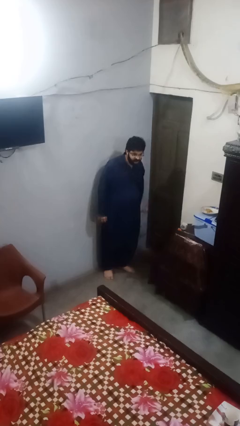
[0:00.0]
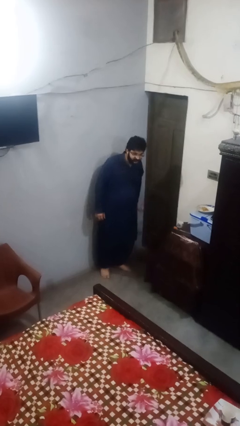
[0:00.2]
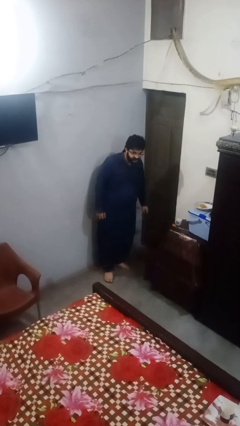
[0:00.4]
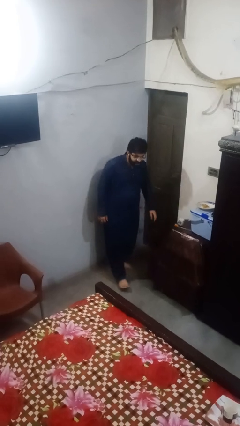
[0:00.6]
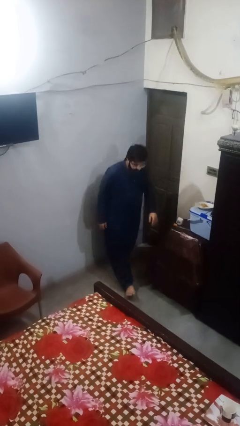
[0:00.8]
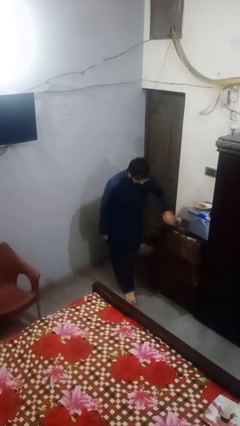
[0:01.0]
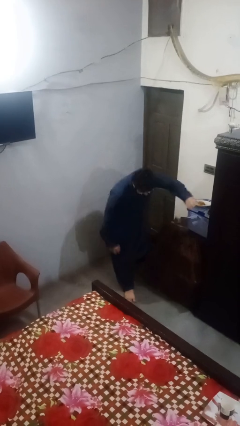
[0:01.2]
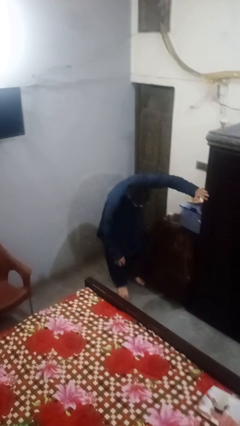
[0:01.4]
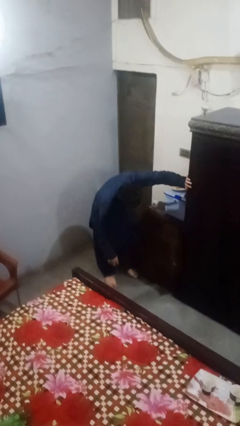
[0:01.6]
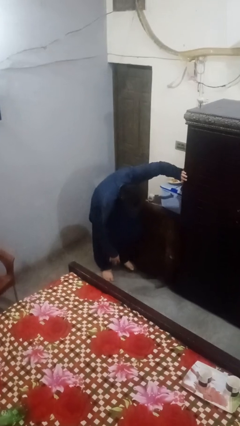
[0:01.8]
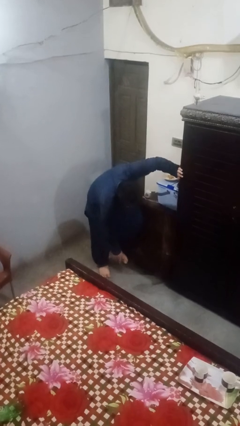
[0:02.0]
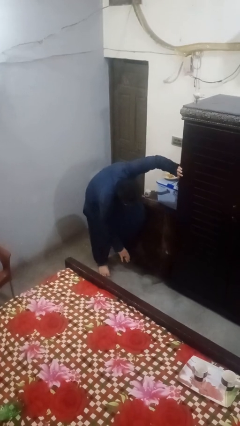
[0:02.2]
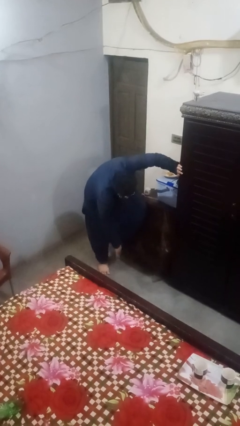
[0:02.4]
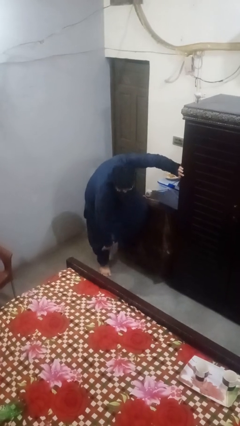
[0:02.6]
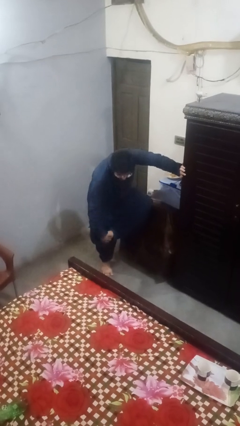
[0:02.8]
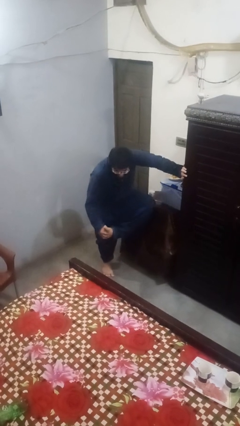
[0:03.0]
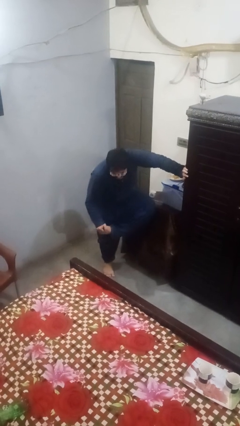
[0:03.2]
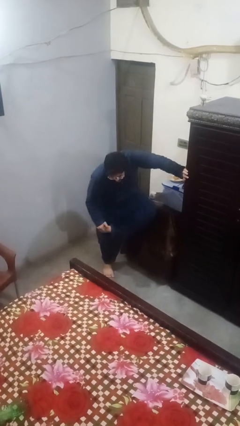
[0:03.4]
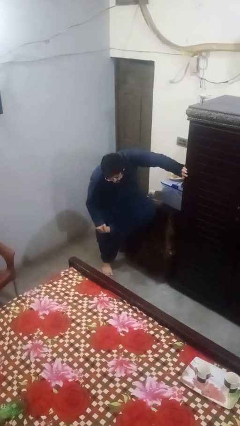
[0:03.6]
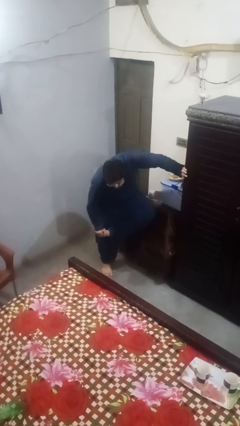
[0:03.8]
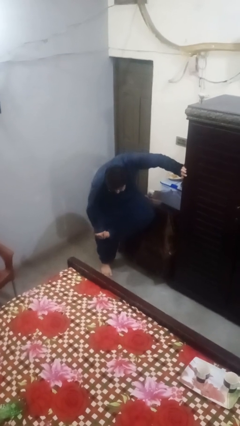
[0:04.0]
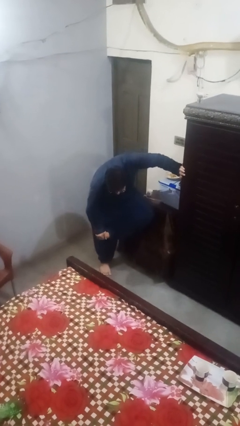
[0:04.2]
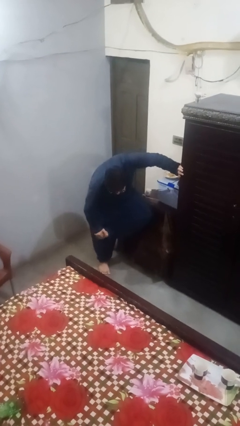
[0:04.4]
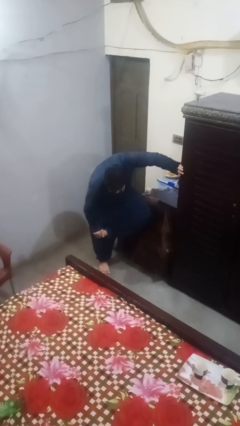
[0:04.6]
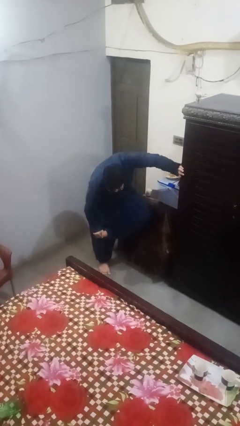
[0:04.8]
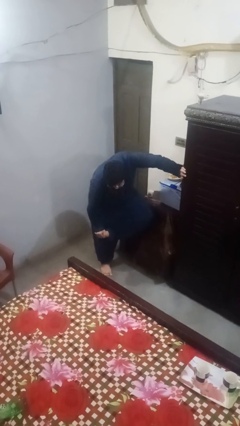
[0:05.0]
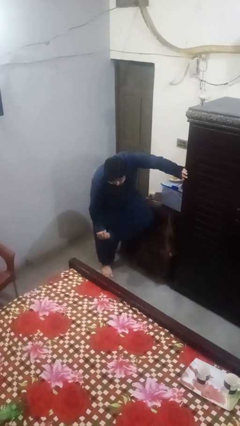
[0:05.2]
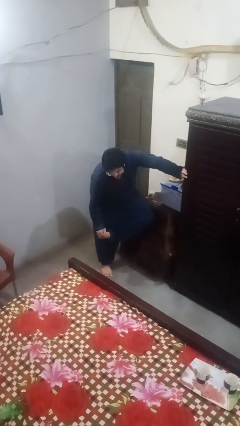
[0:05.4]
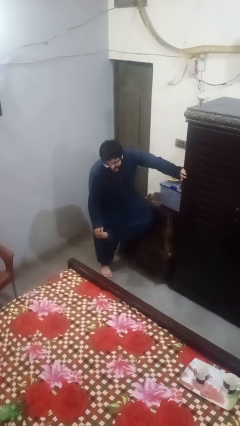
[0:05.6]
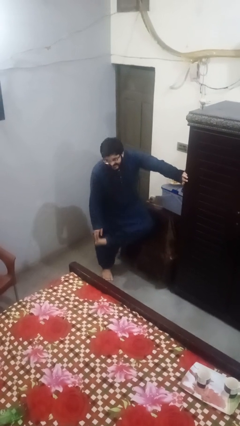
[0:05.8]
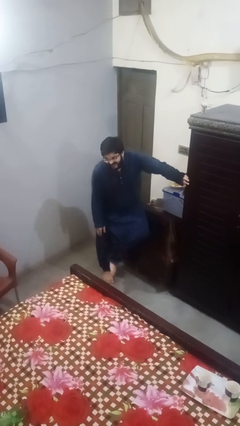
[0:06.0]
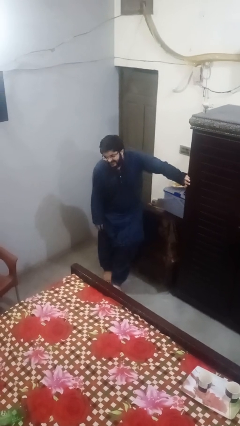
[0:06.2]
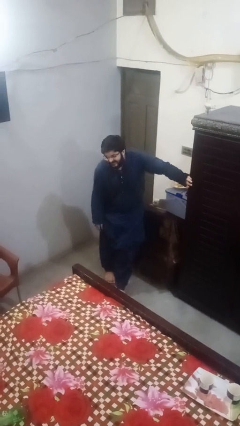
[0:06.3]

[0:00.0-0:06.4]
person stubs toe

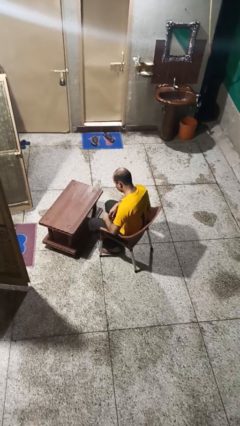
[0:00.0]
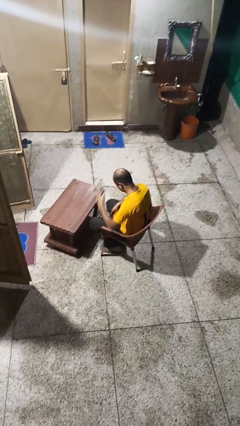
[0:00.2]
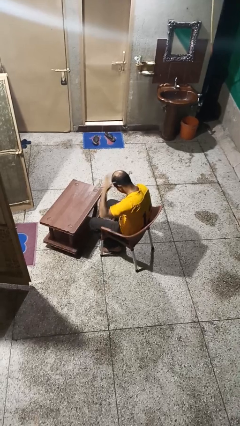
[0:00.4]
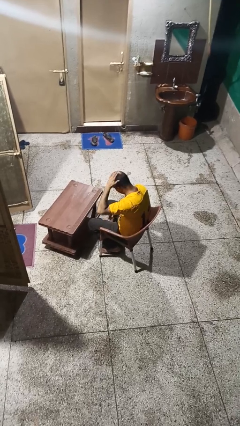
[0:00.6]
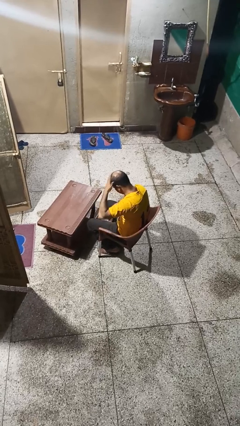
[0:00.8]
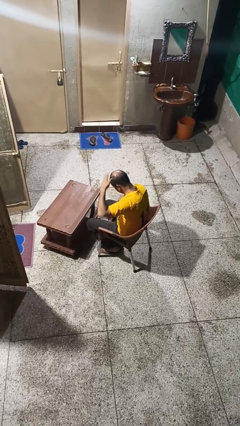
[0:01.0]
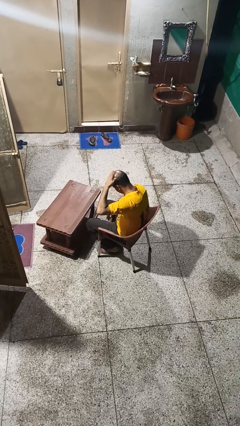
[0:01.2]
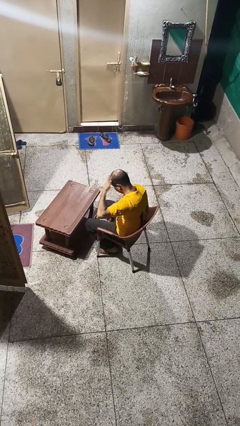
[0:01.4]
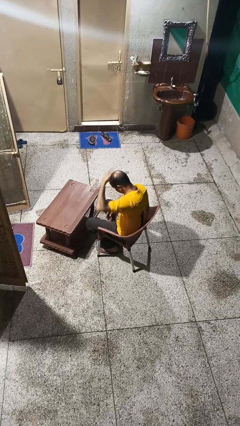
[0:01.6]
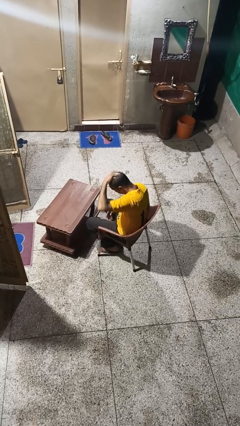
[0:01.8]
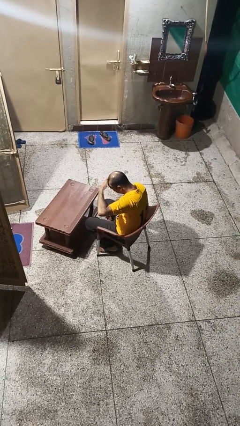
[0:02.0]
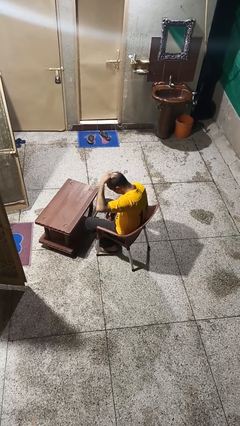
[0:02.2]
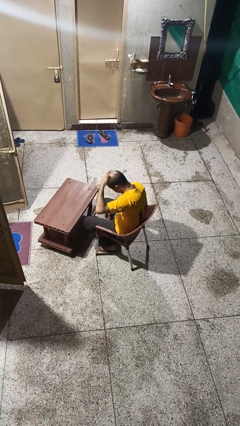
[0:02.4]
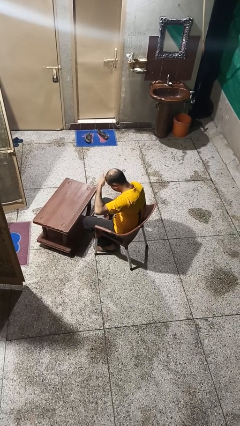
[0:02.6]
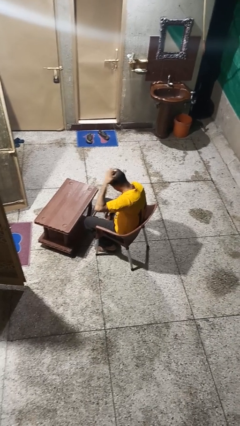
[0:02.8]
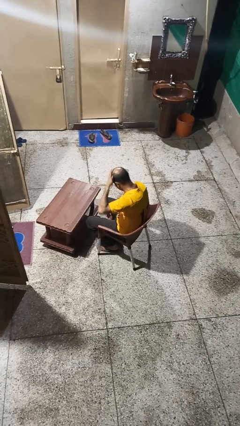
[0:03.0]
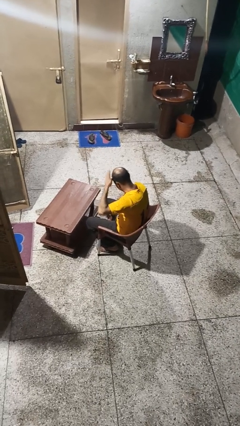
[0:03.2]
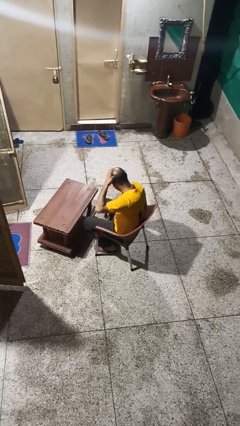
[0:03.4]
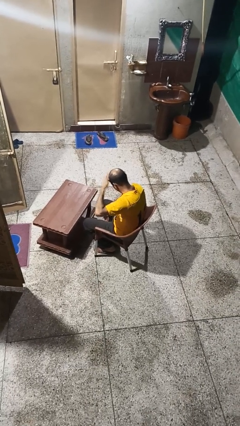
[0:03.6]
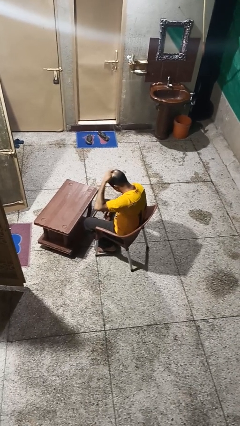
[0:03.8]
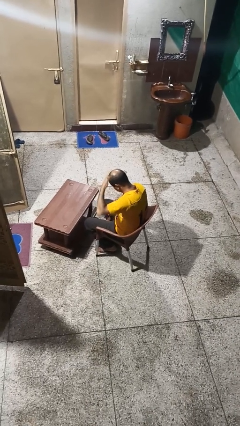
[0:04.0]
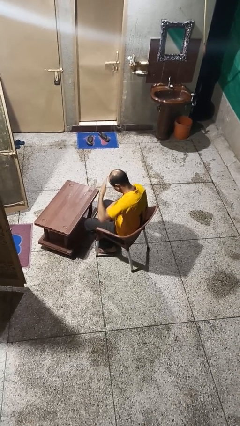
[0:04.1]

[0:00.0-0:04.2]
person strokes hair

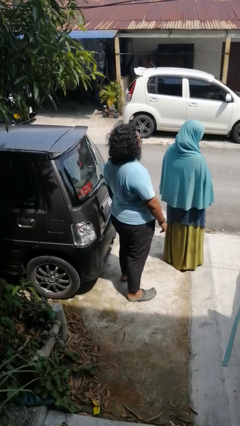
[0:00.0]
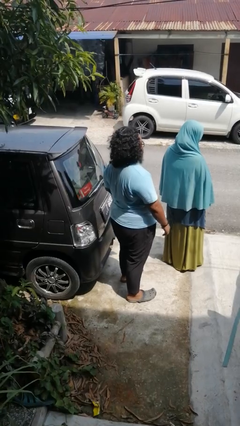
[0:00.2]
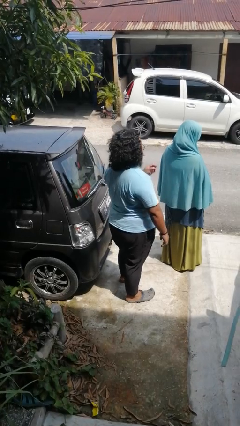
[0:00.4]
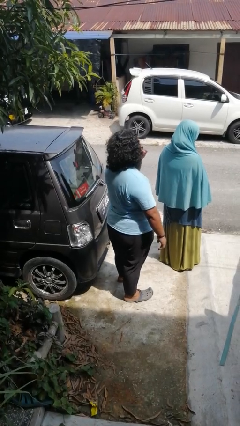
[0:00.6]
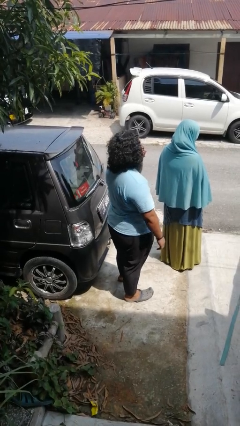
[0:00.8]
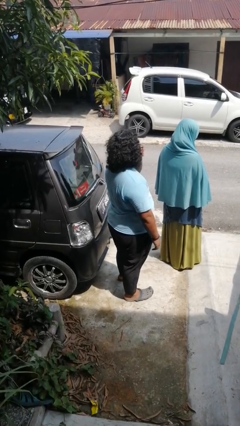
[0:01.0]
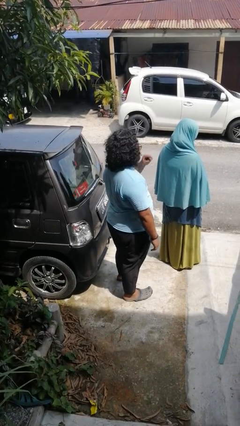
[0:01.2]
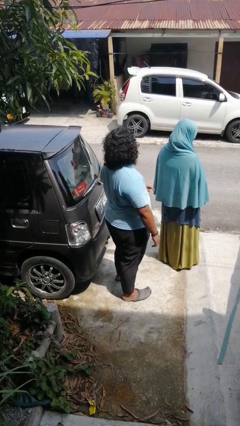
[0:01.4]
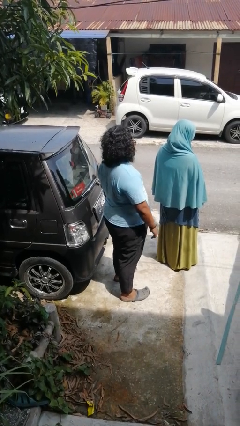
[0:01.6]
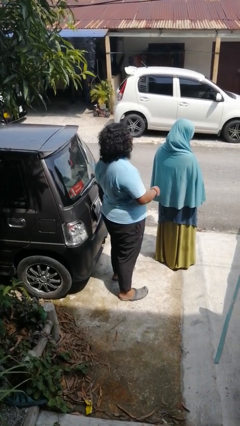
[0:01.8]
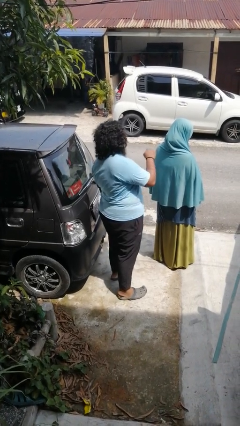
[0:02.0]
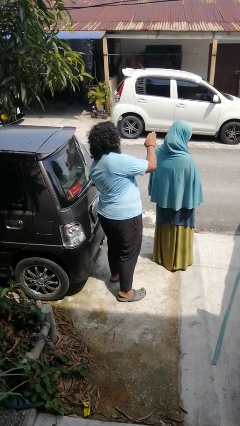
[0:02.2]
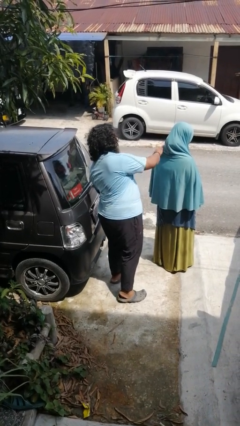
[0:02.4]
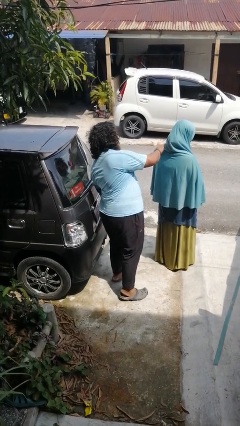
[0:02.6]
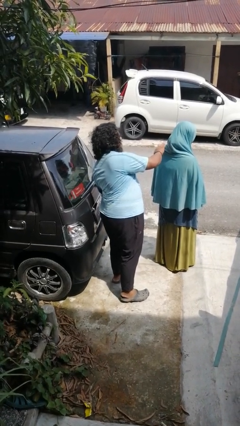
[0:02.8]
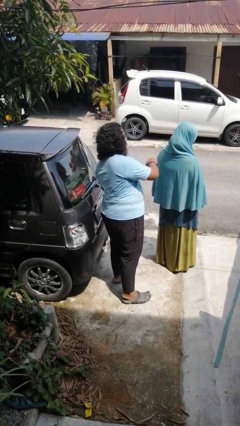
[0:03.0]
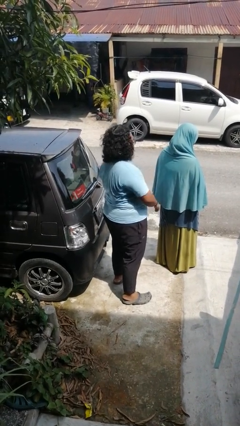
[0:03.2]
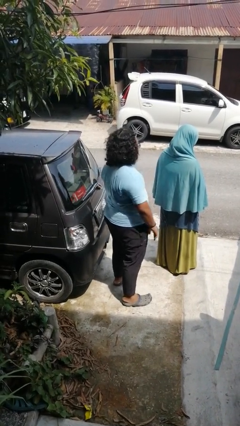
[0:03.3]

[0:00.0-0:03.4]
person touches back of person

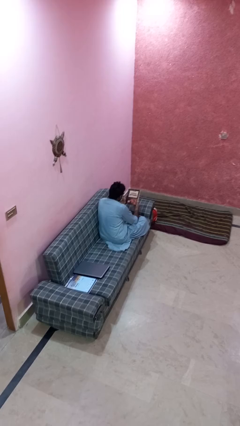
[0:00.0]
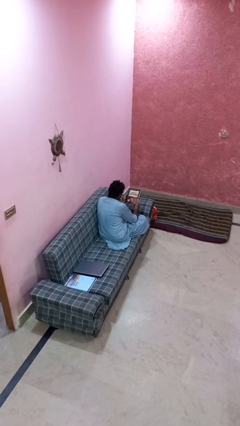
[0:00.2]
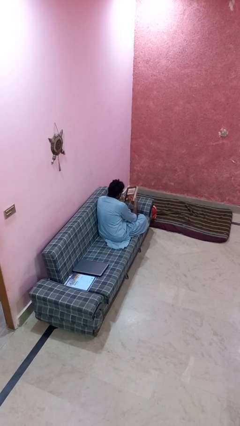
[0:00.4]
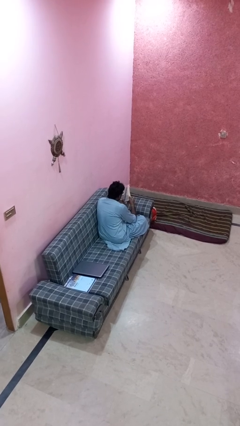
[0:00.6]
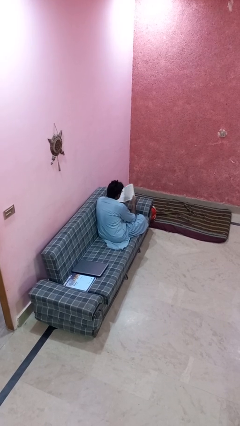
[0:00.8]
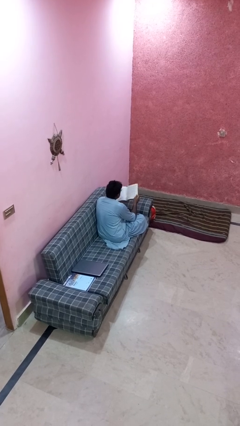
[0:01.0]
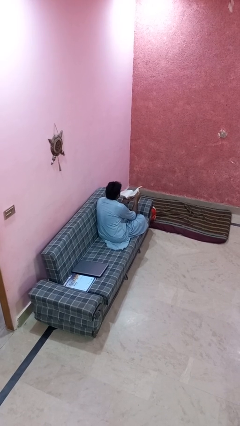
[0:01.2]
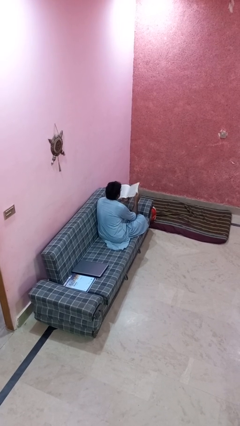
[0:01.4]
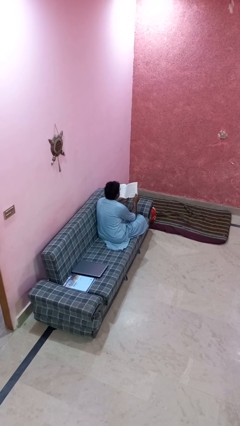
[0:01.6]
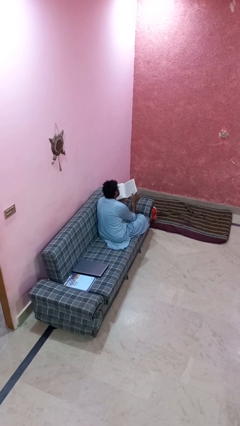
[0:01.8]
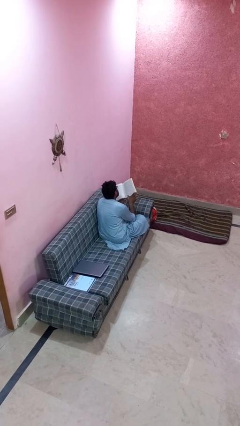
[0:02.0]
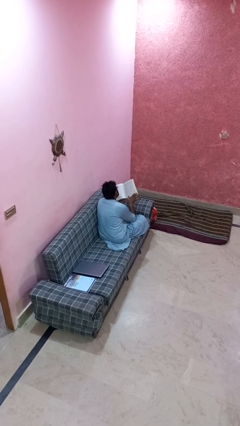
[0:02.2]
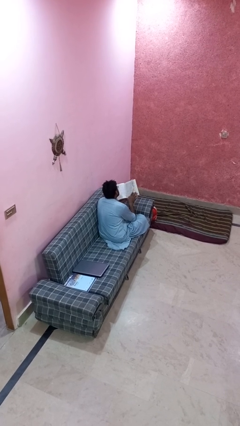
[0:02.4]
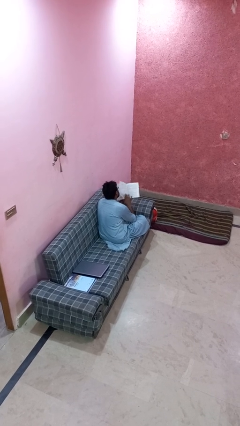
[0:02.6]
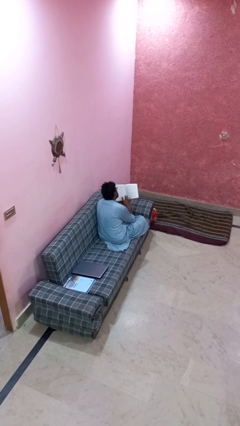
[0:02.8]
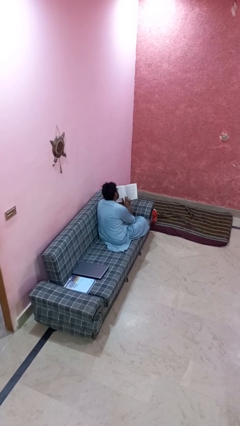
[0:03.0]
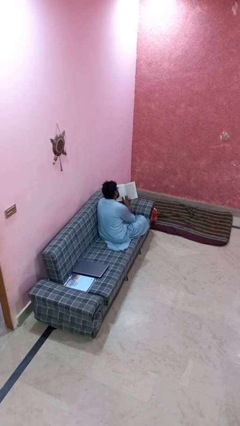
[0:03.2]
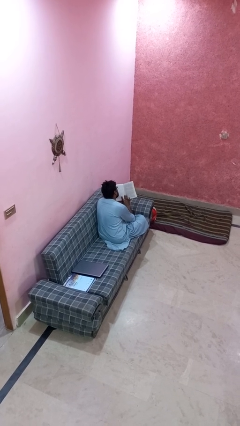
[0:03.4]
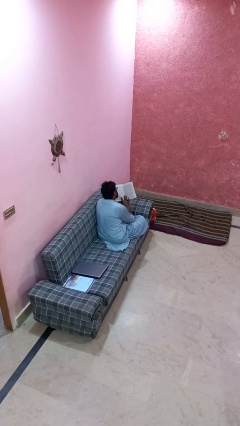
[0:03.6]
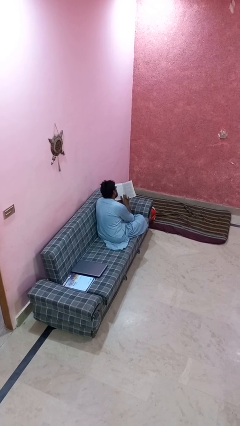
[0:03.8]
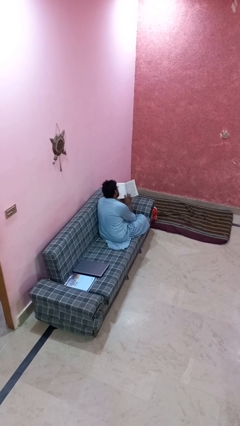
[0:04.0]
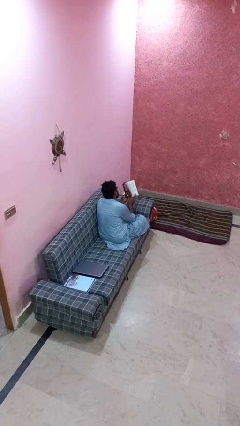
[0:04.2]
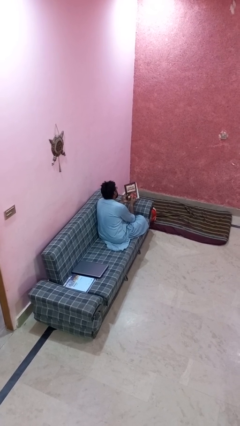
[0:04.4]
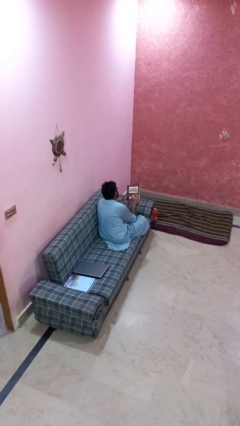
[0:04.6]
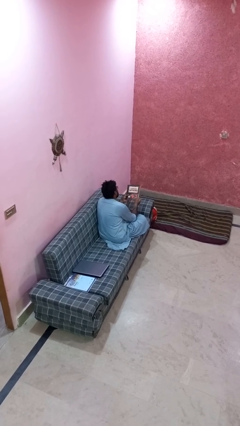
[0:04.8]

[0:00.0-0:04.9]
person reads book
